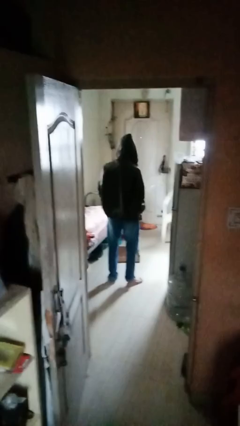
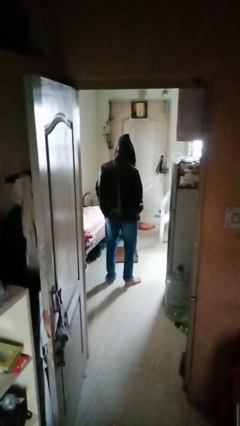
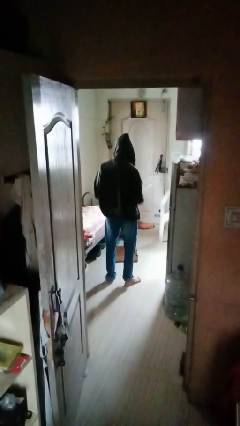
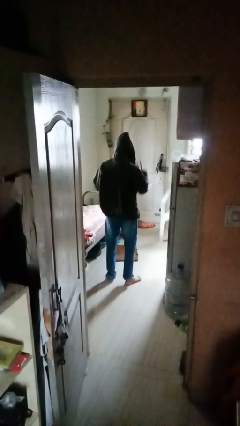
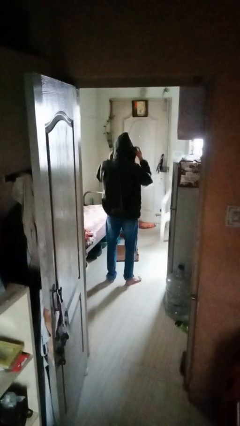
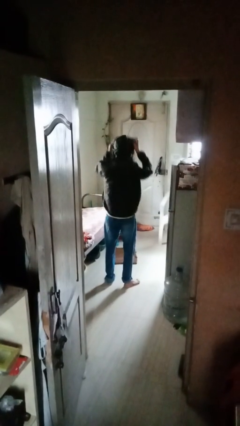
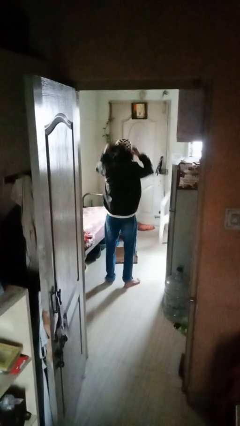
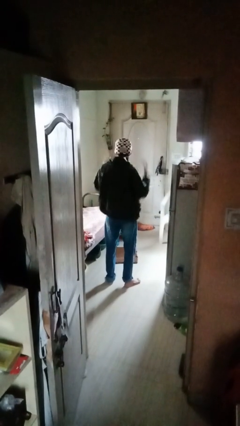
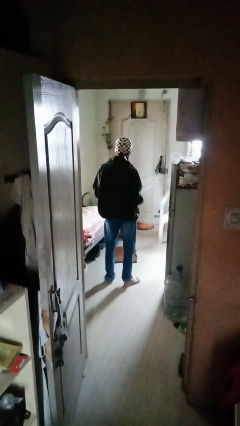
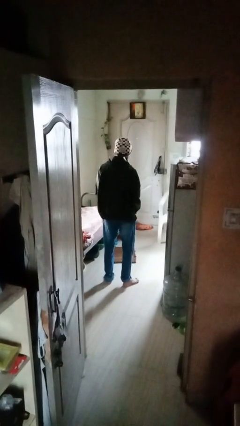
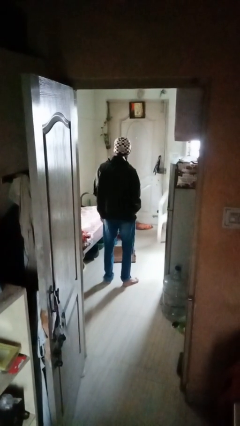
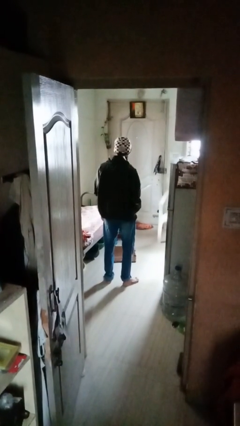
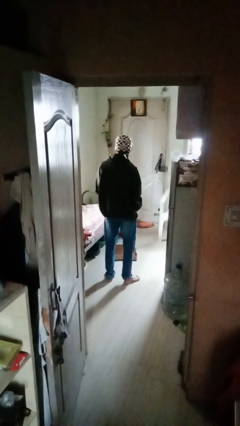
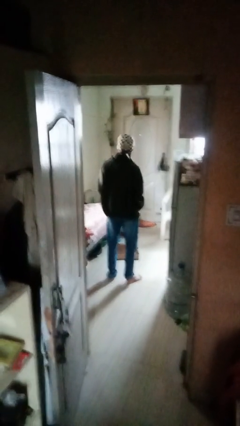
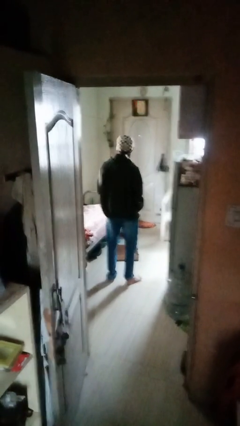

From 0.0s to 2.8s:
person takes off hoodie

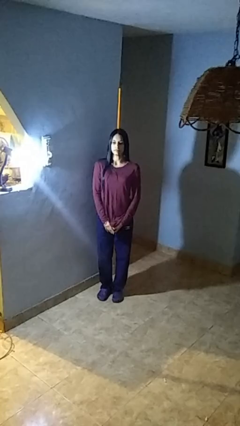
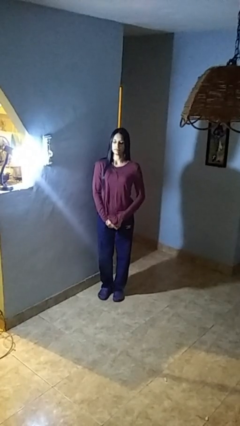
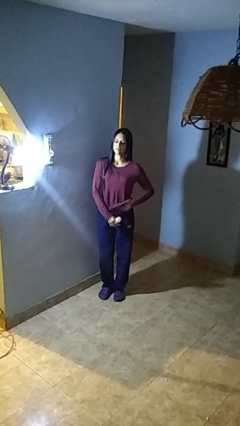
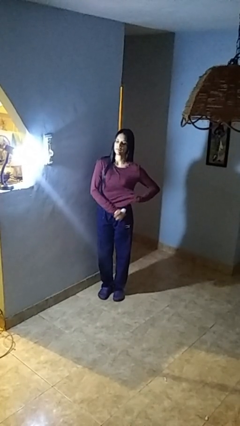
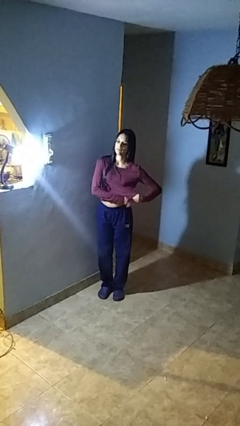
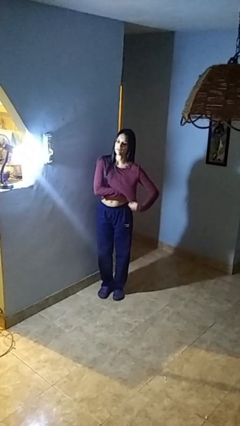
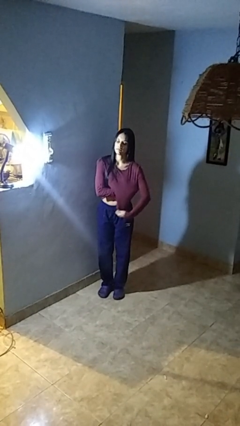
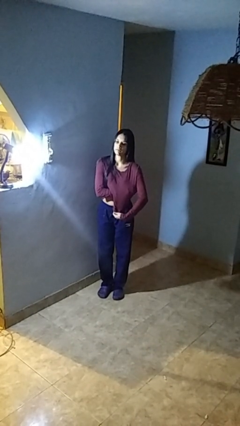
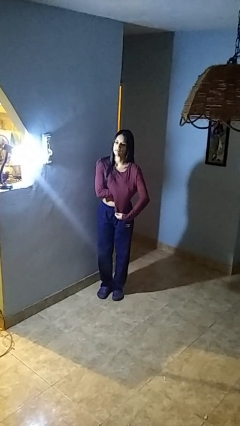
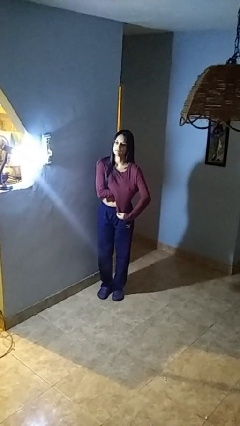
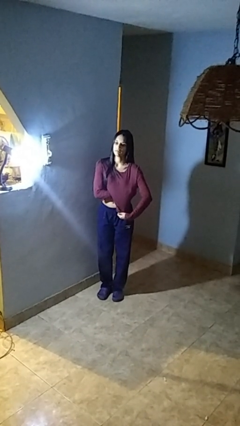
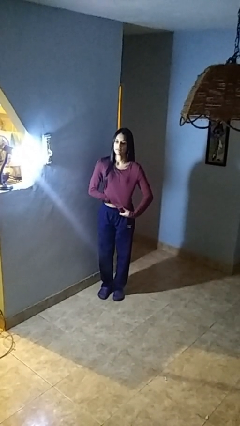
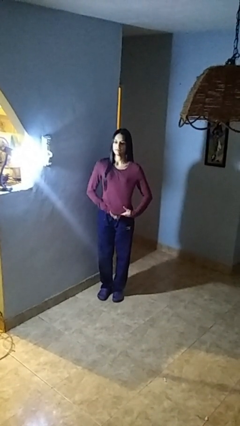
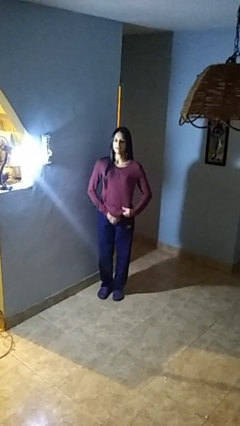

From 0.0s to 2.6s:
person applies deodorant

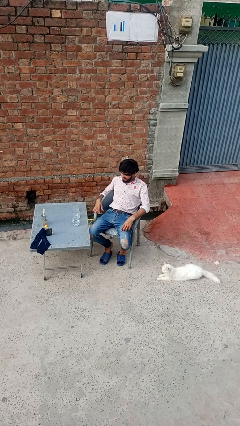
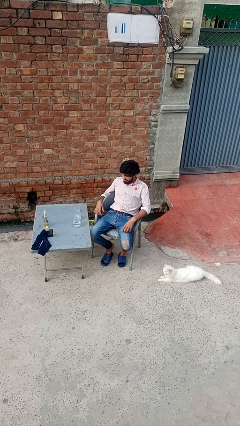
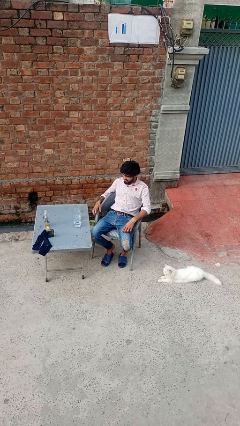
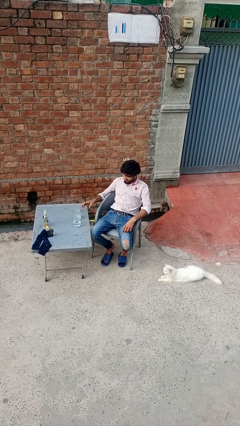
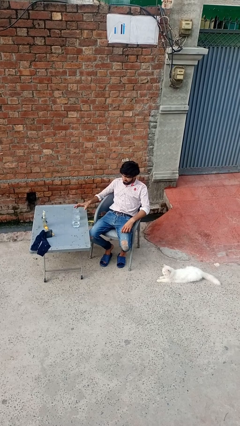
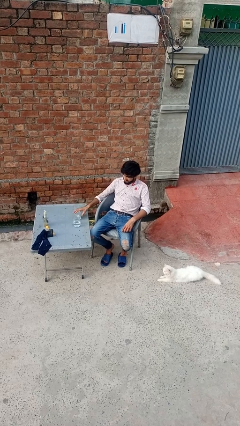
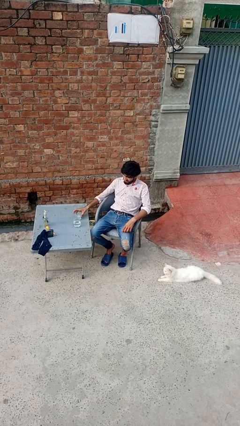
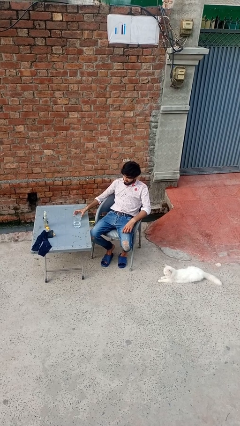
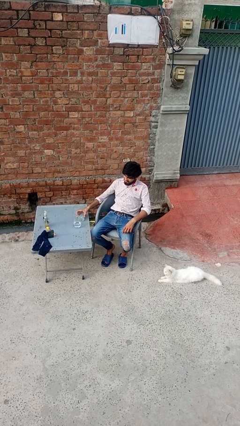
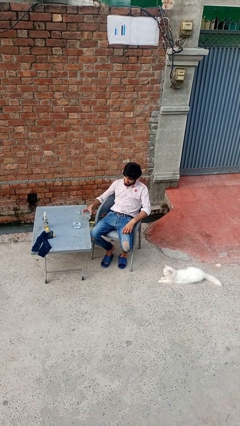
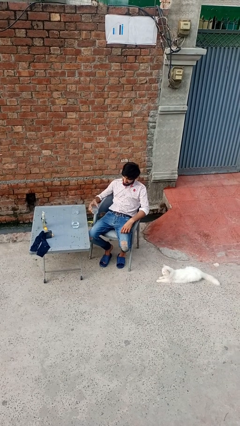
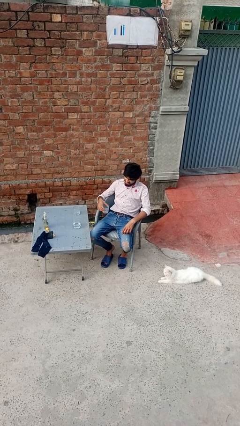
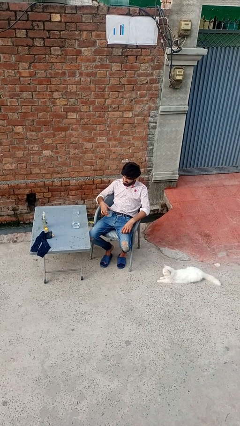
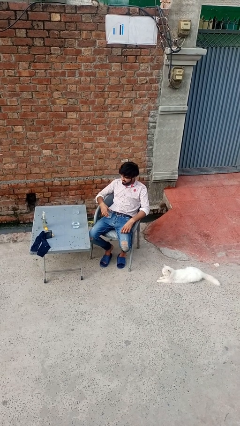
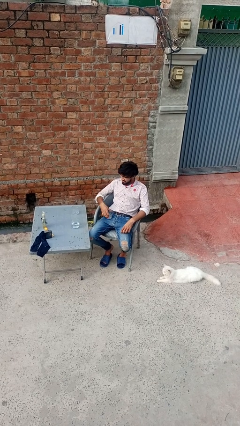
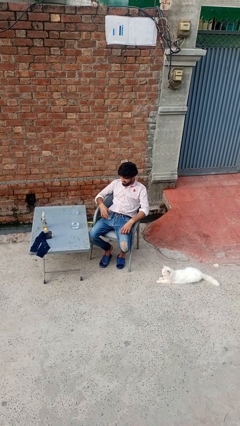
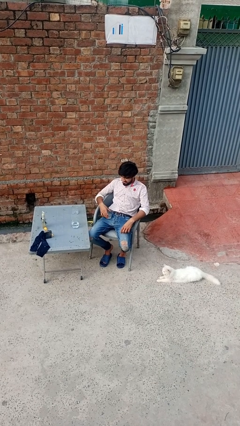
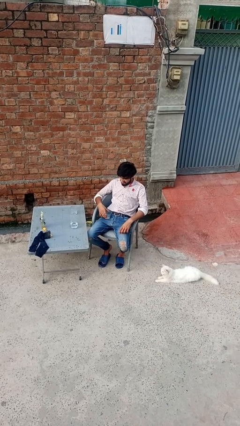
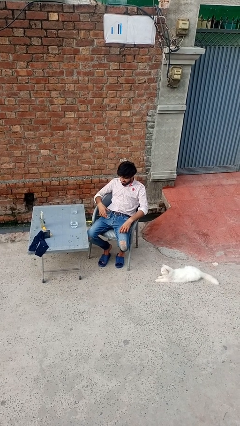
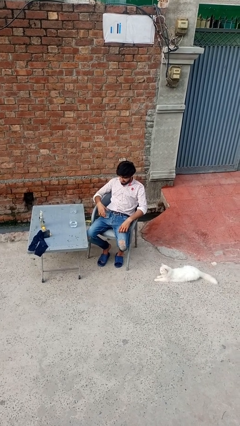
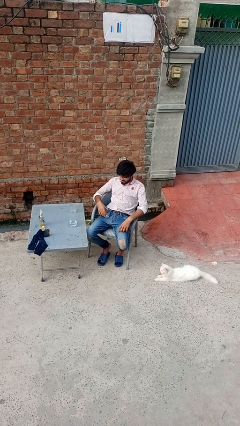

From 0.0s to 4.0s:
person picks up object from table

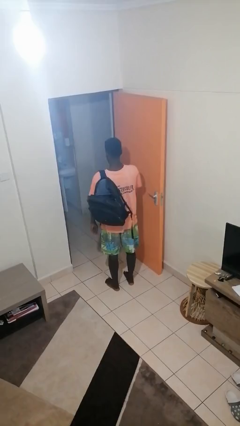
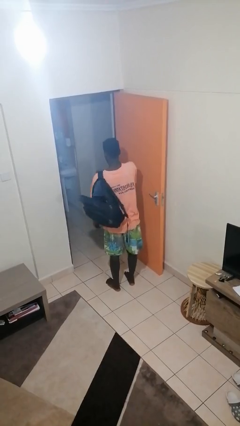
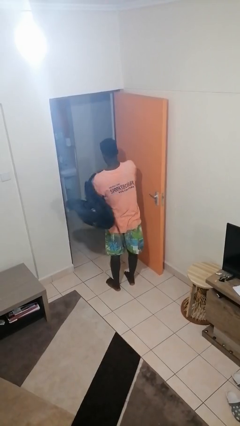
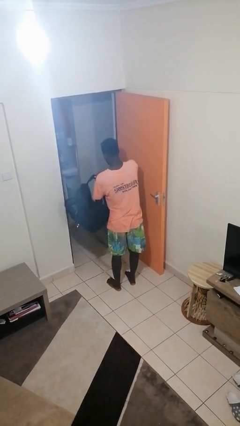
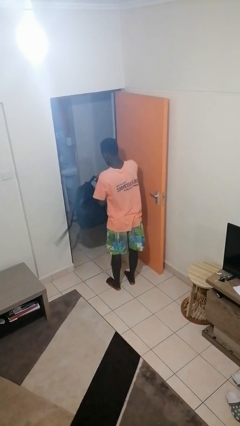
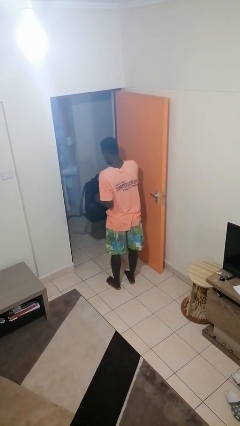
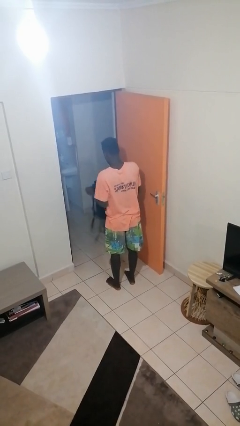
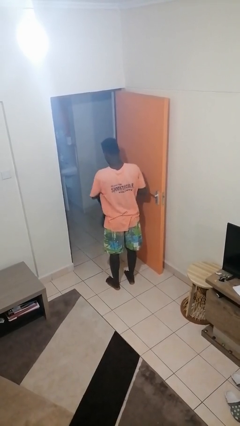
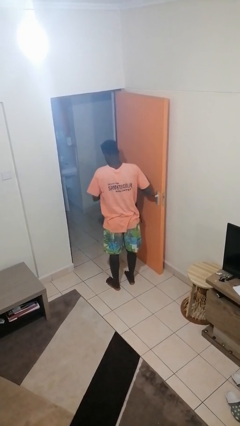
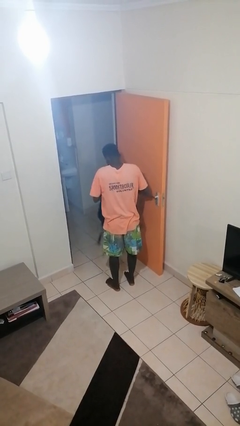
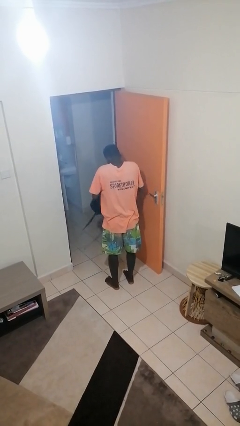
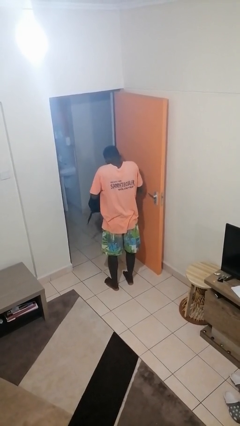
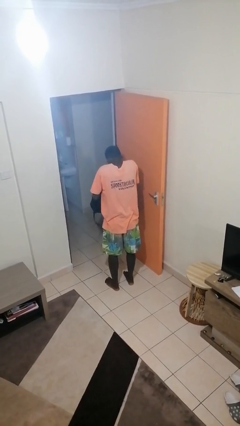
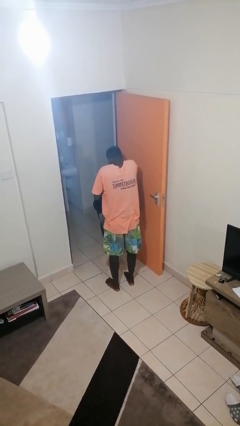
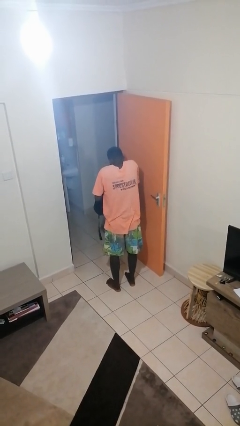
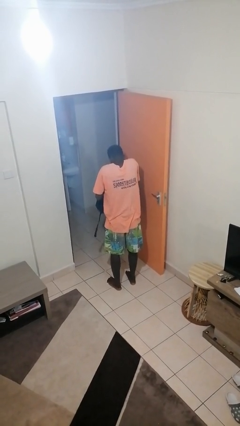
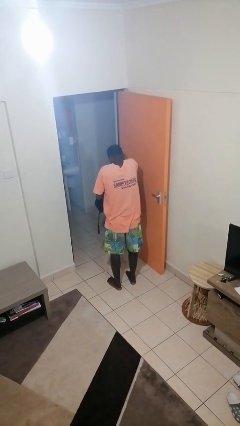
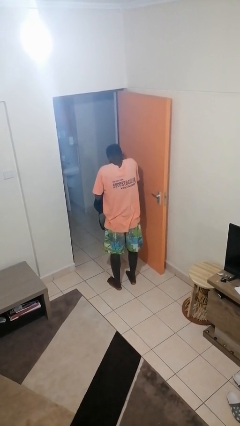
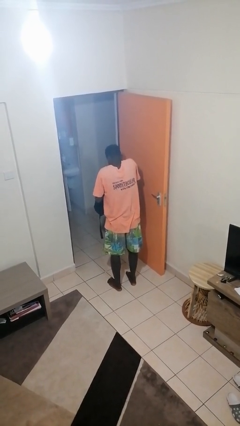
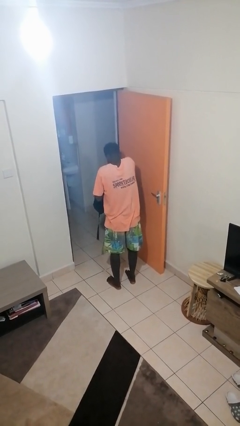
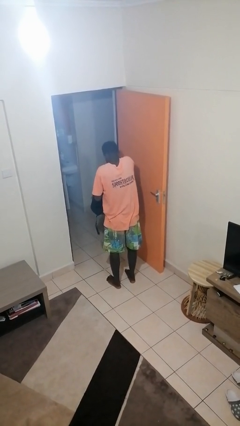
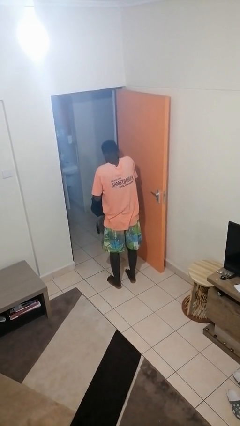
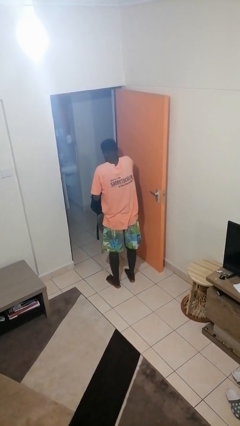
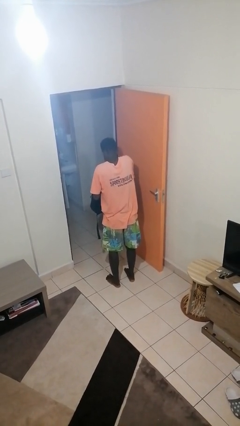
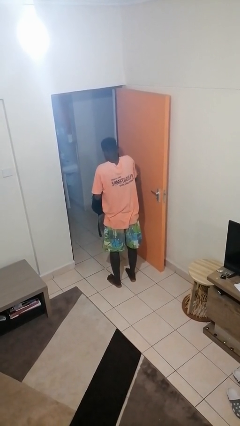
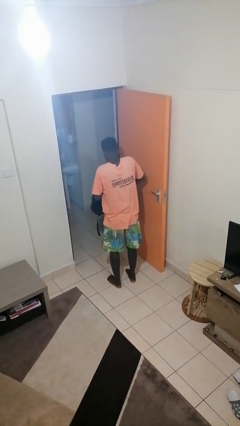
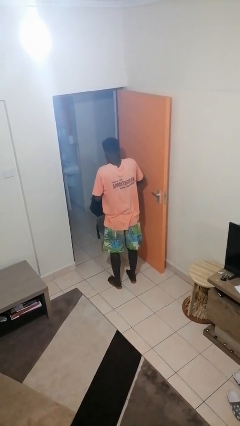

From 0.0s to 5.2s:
person searches in backpack

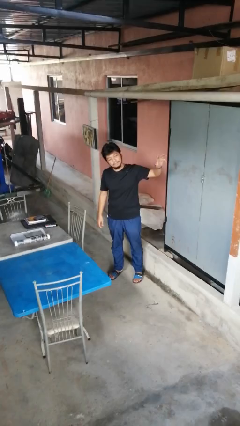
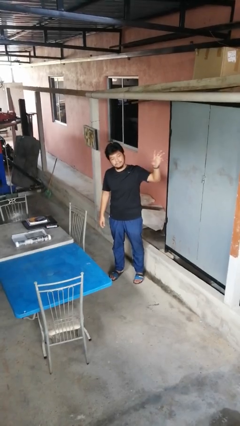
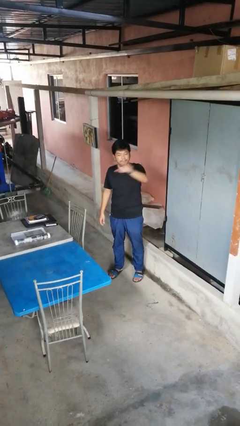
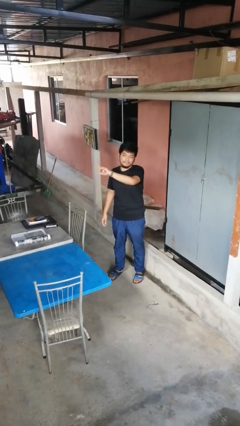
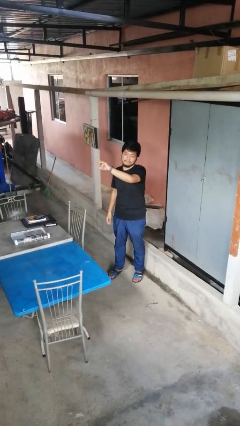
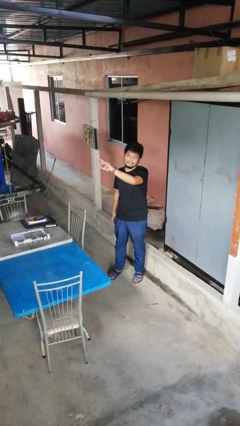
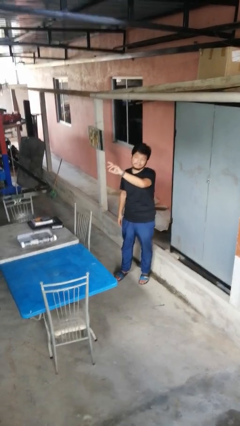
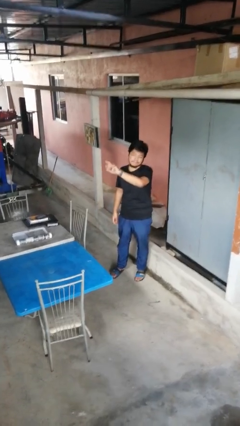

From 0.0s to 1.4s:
person gestures swipe right

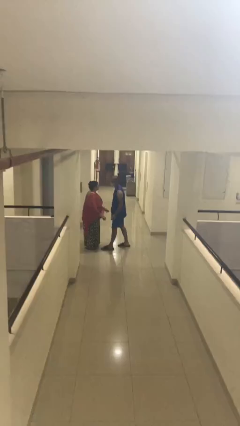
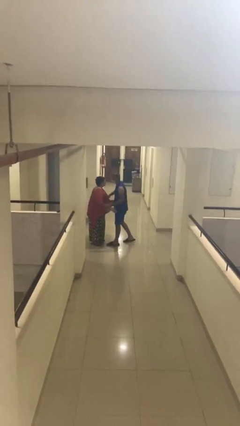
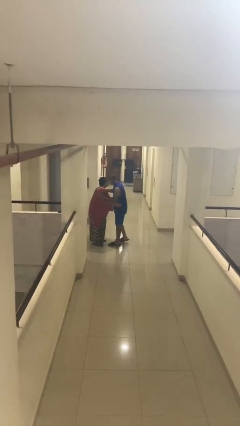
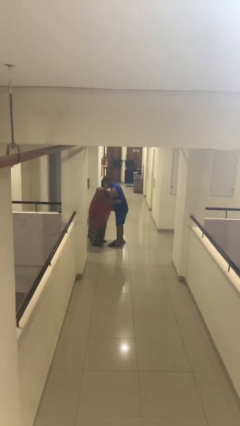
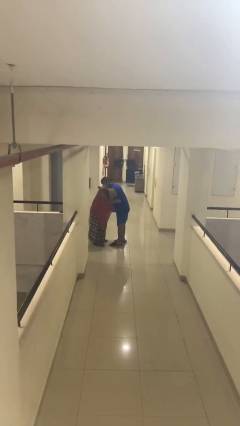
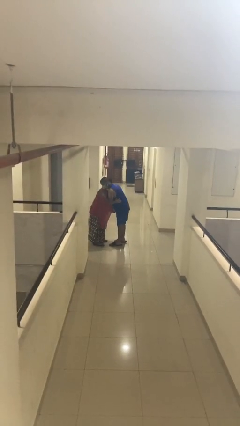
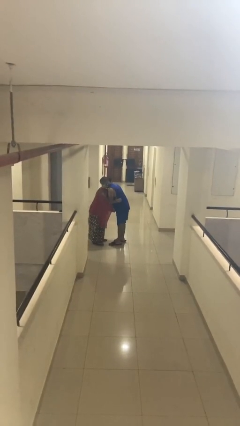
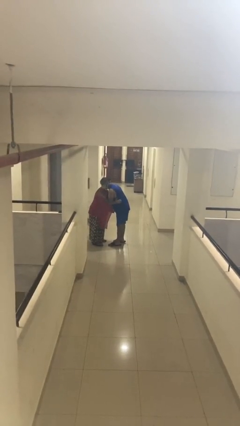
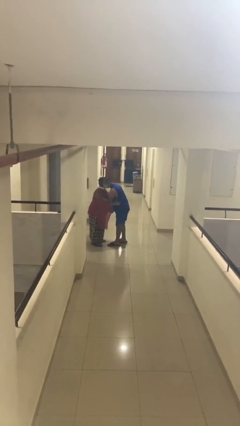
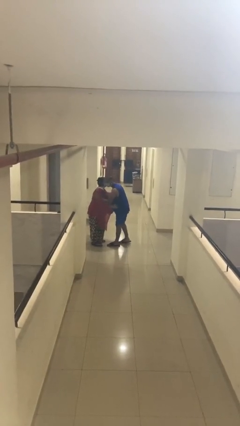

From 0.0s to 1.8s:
person embraces person
